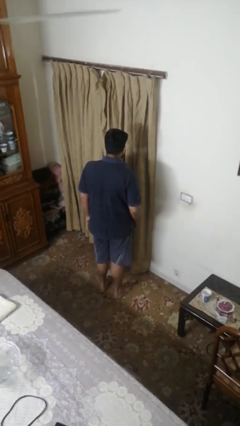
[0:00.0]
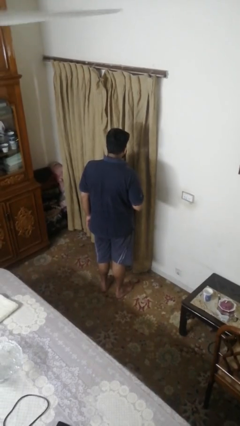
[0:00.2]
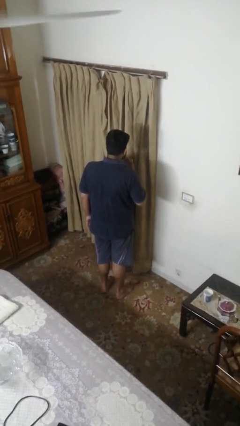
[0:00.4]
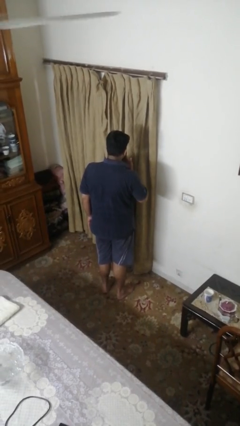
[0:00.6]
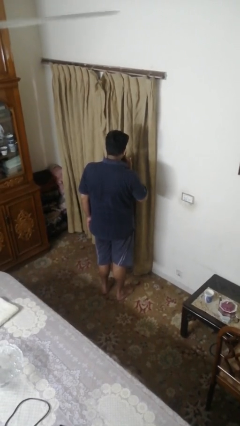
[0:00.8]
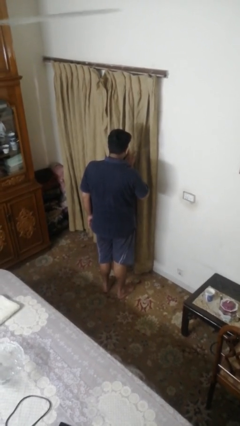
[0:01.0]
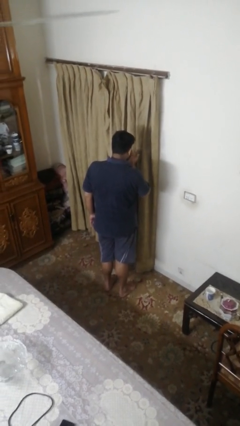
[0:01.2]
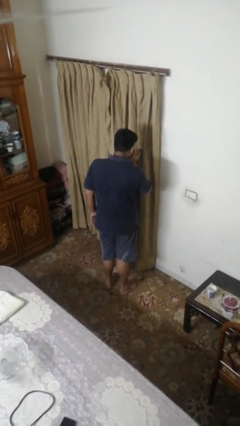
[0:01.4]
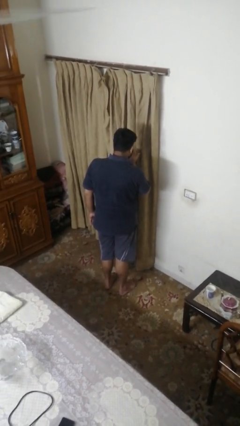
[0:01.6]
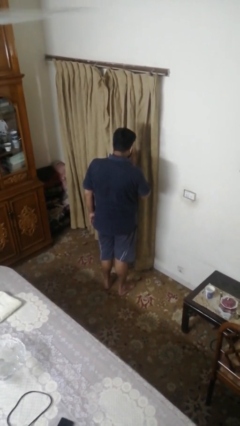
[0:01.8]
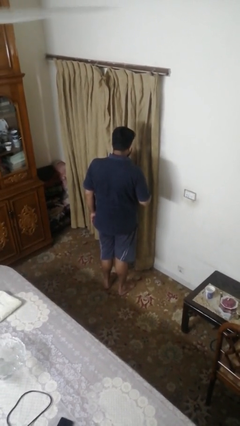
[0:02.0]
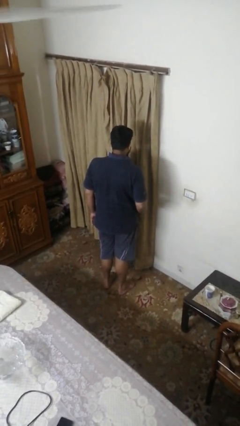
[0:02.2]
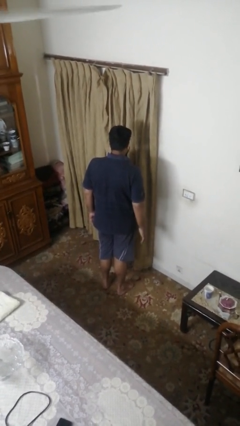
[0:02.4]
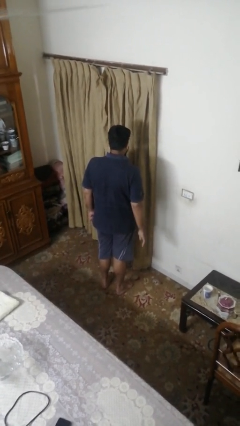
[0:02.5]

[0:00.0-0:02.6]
person gestures blow kiss

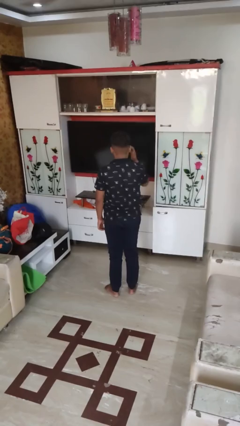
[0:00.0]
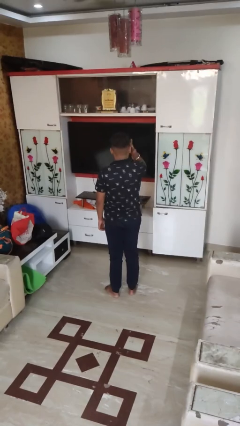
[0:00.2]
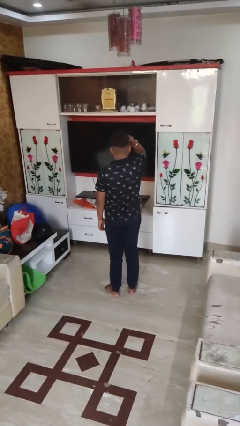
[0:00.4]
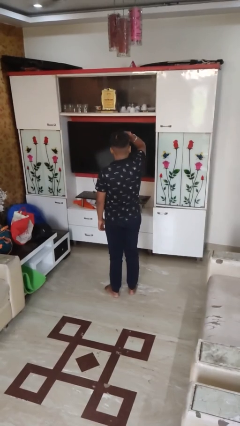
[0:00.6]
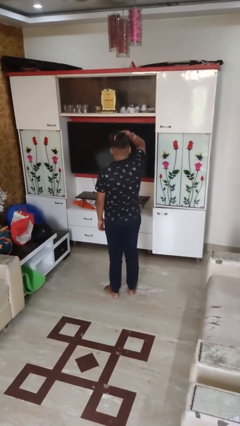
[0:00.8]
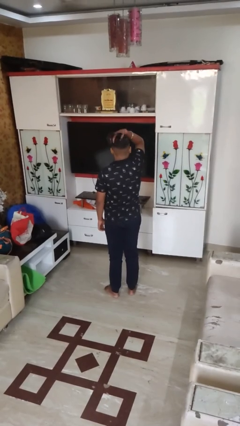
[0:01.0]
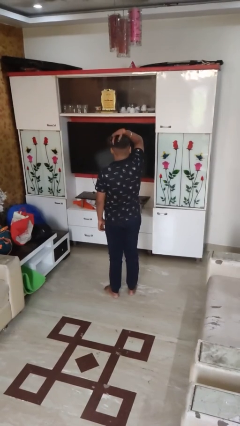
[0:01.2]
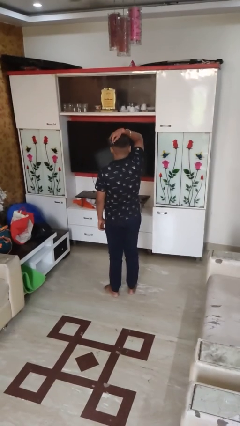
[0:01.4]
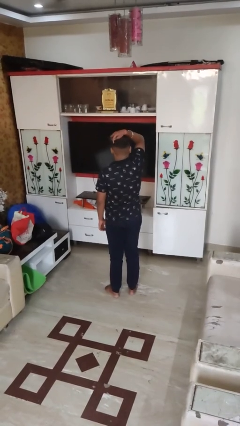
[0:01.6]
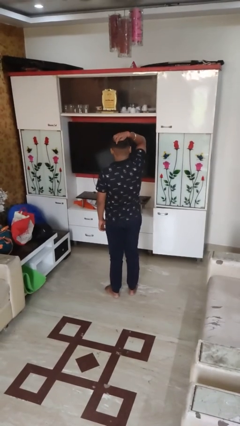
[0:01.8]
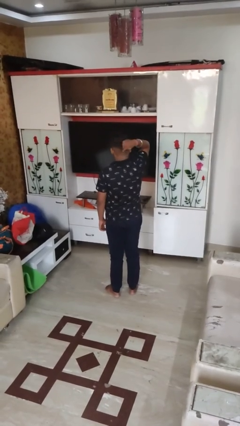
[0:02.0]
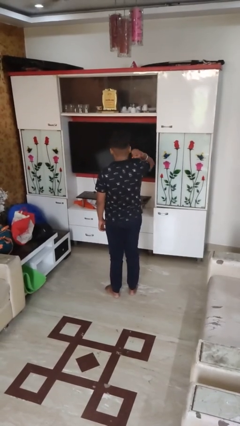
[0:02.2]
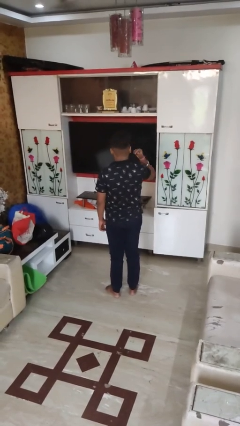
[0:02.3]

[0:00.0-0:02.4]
person strokes hair

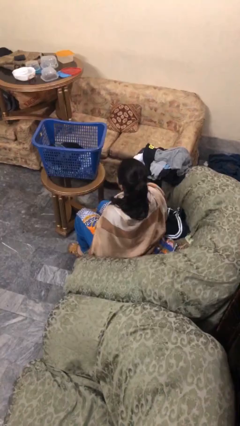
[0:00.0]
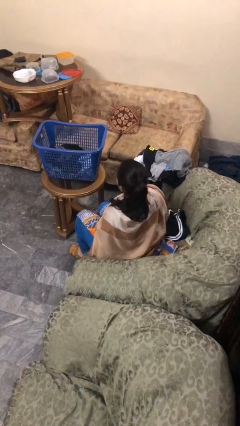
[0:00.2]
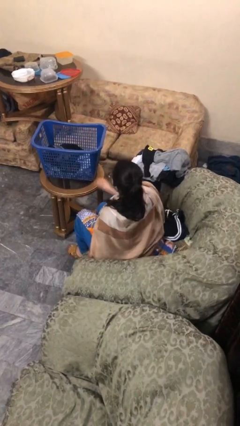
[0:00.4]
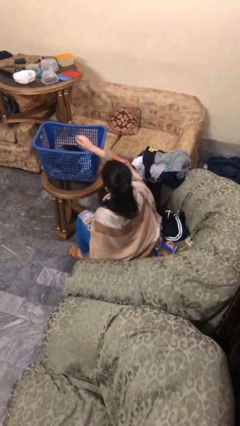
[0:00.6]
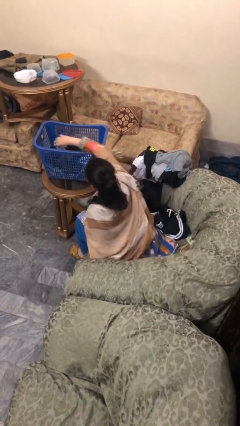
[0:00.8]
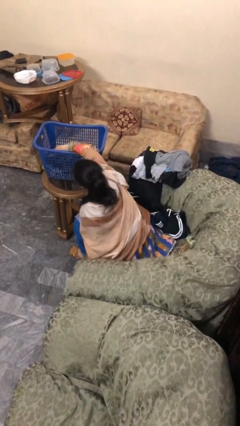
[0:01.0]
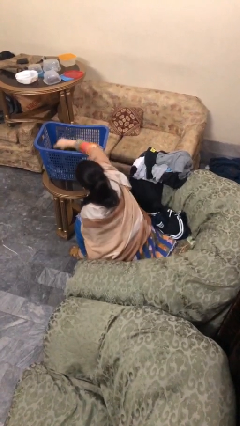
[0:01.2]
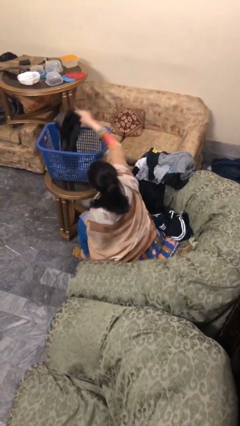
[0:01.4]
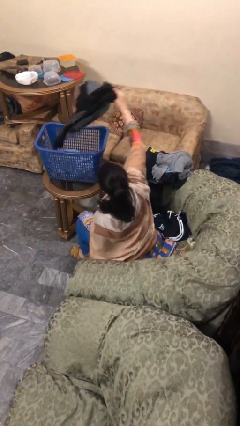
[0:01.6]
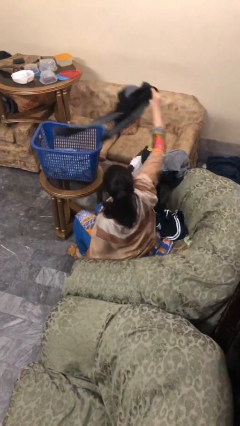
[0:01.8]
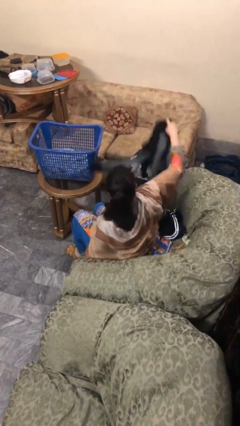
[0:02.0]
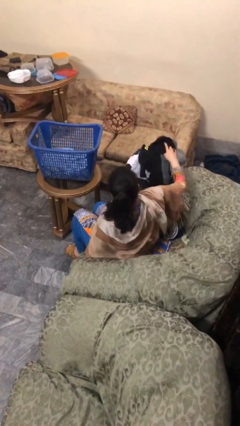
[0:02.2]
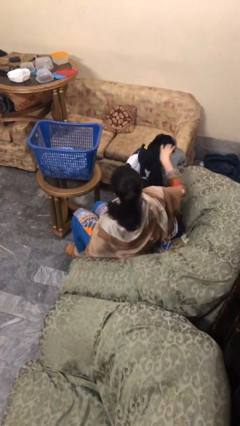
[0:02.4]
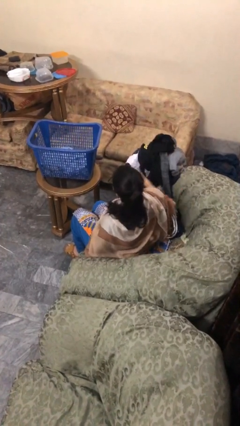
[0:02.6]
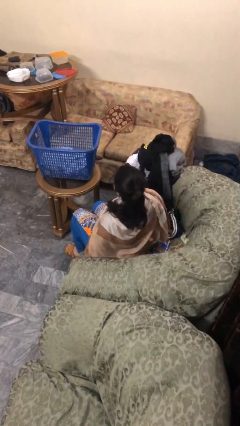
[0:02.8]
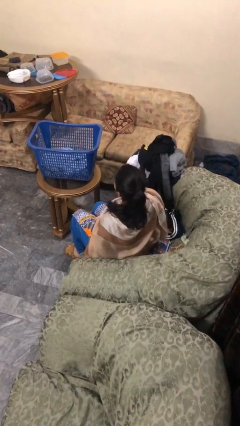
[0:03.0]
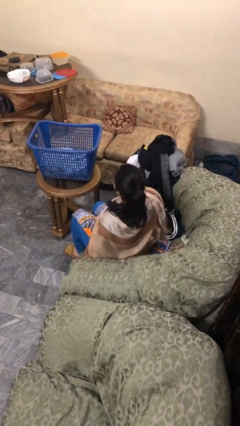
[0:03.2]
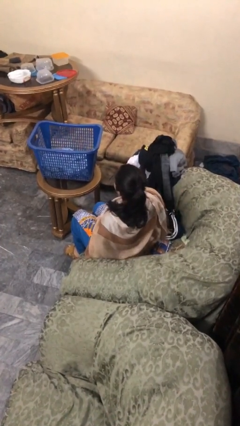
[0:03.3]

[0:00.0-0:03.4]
person takes object from basket

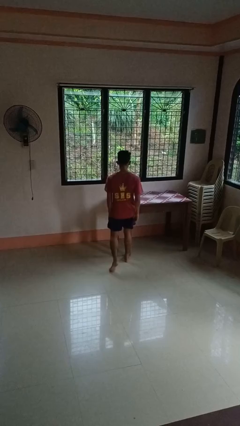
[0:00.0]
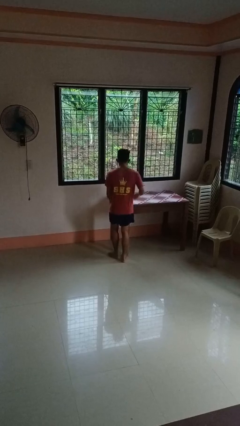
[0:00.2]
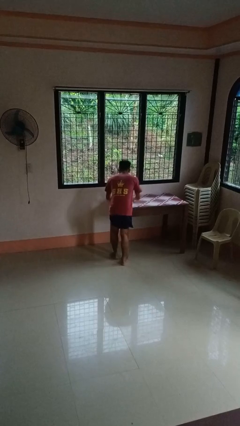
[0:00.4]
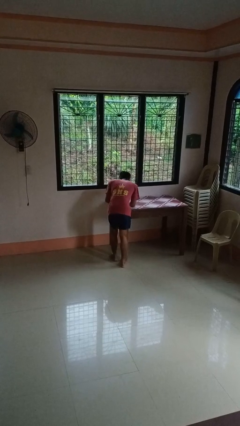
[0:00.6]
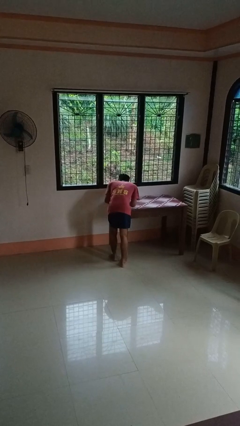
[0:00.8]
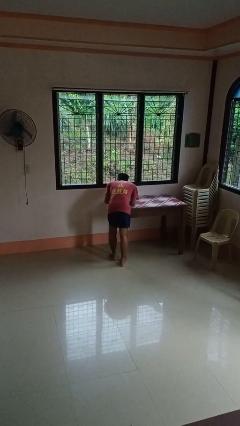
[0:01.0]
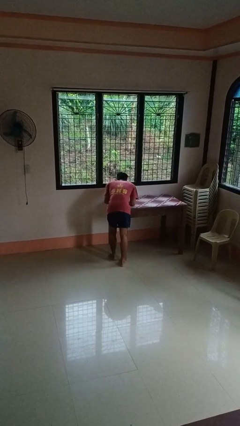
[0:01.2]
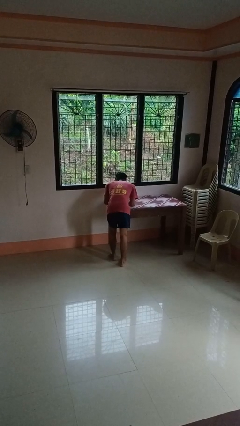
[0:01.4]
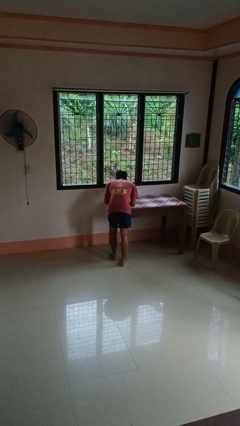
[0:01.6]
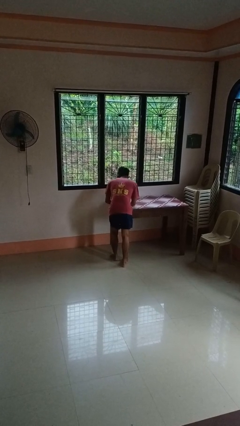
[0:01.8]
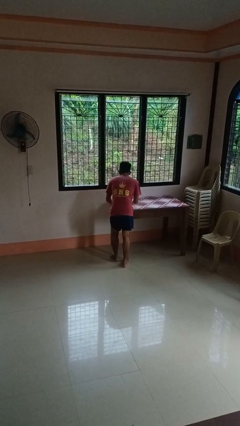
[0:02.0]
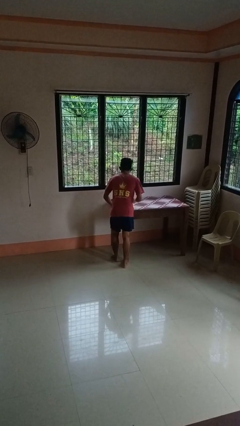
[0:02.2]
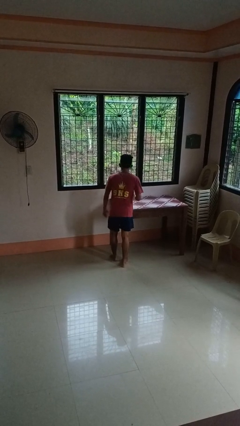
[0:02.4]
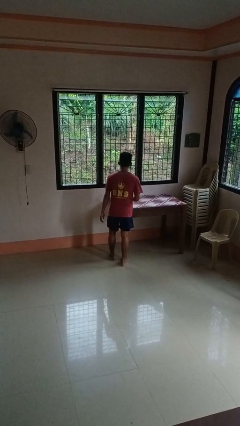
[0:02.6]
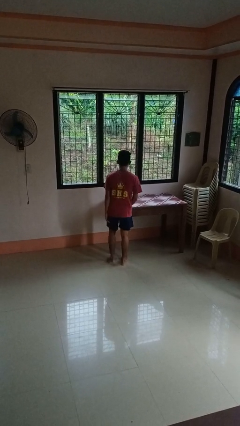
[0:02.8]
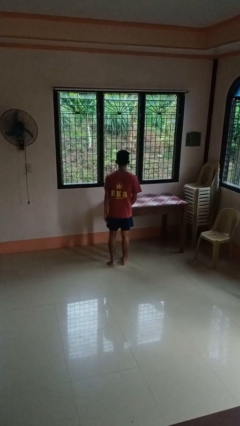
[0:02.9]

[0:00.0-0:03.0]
person bumps into table

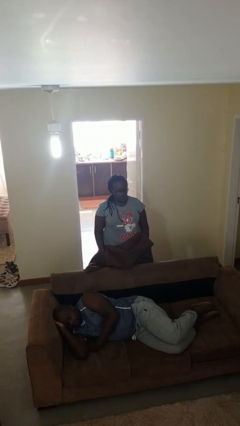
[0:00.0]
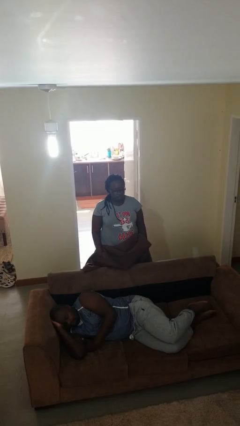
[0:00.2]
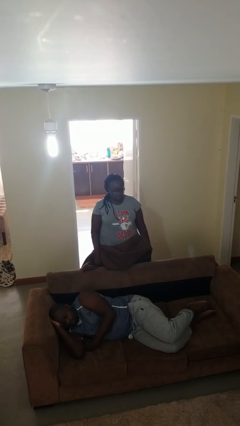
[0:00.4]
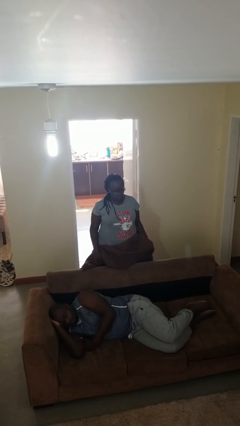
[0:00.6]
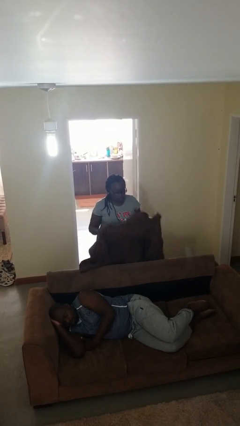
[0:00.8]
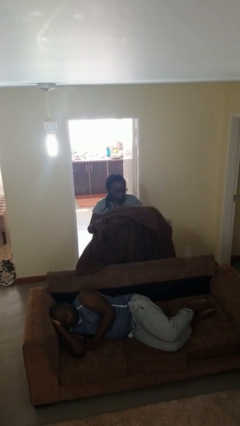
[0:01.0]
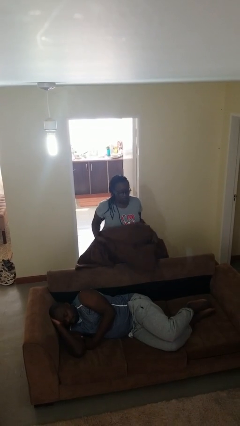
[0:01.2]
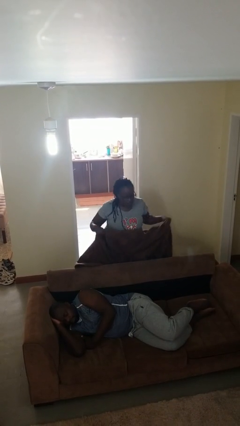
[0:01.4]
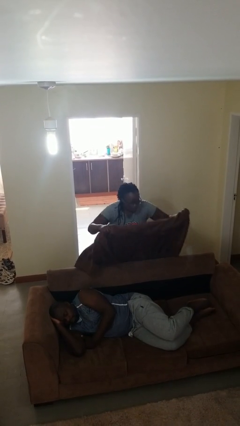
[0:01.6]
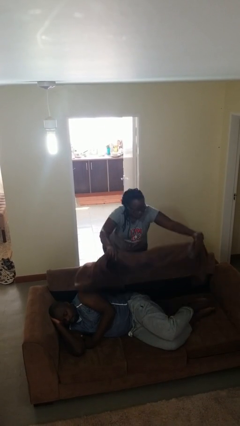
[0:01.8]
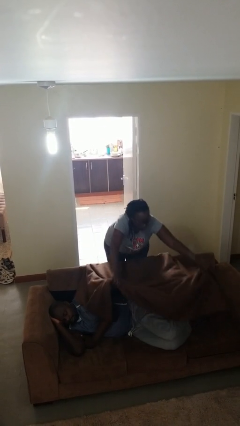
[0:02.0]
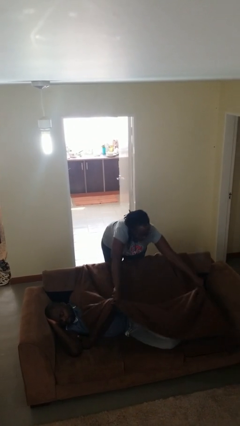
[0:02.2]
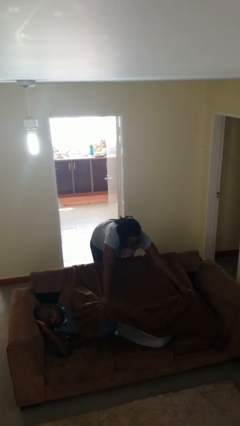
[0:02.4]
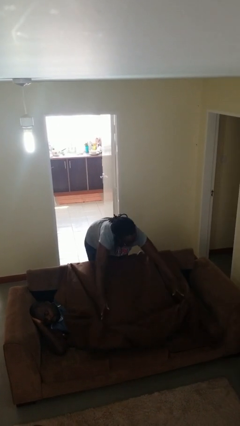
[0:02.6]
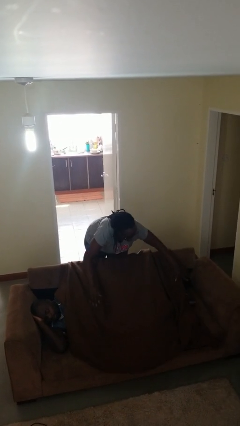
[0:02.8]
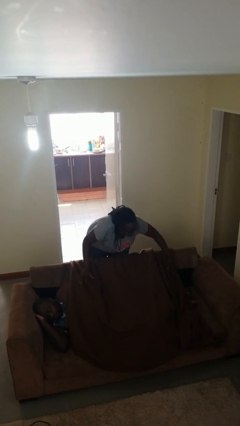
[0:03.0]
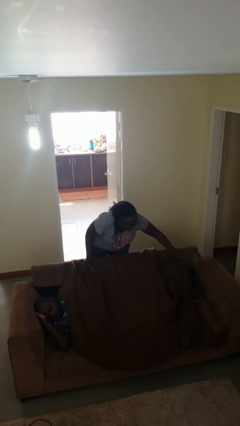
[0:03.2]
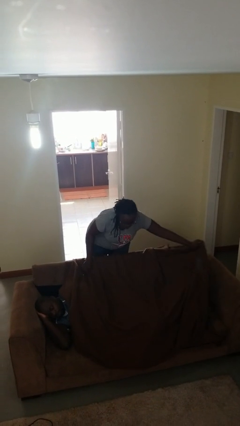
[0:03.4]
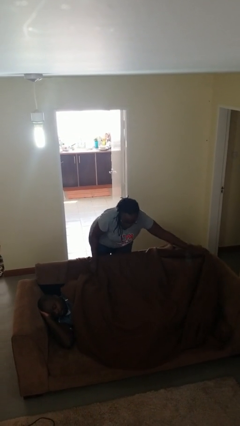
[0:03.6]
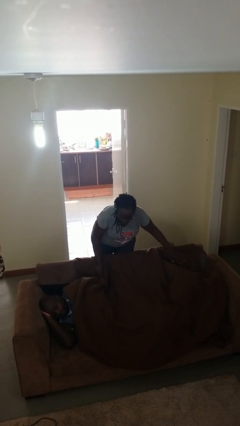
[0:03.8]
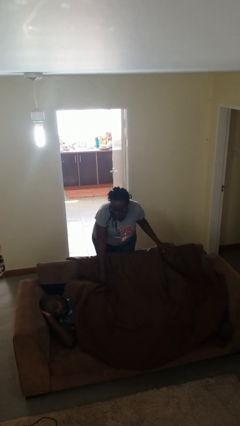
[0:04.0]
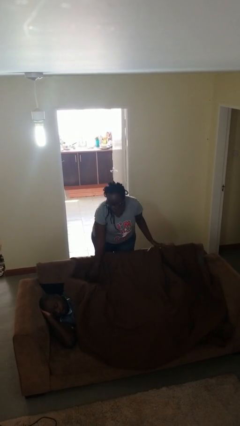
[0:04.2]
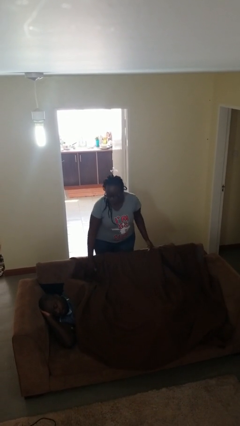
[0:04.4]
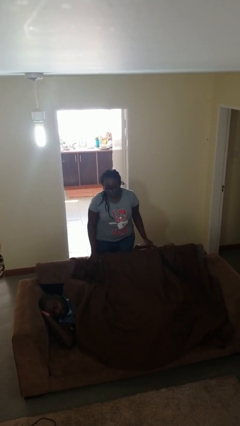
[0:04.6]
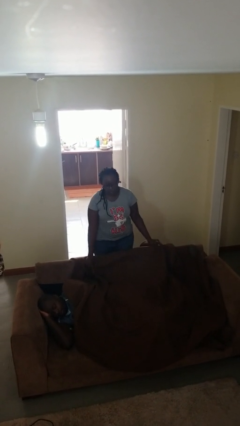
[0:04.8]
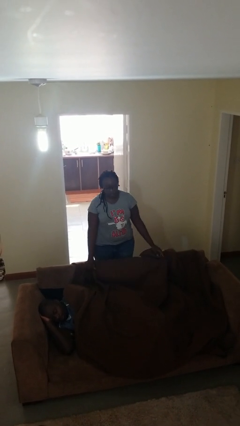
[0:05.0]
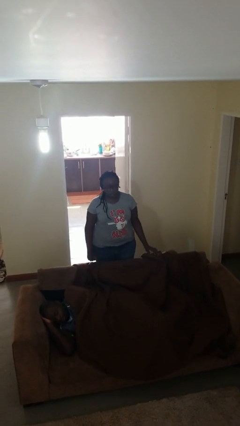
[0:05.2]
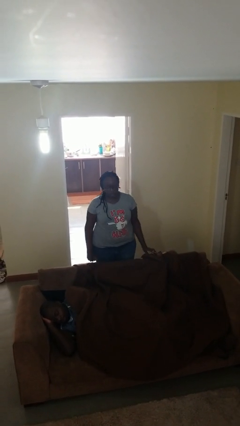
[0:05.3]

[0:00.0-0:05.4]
person covers friend with blanket

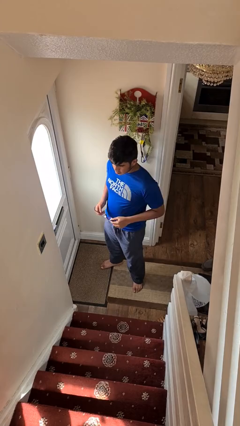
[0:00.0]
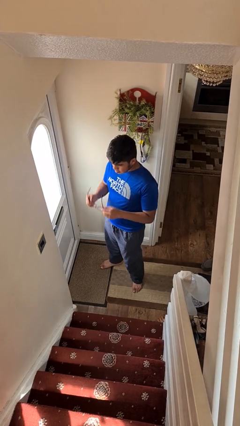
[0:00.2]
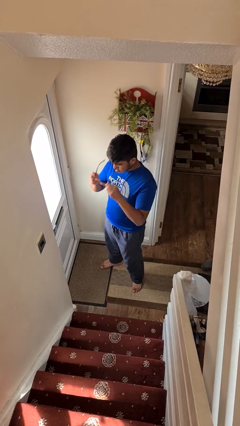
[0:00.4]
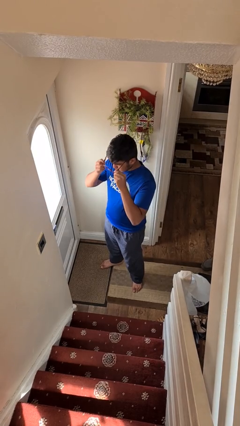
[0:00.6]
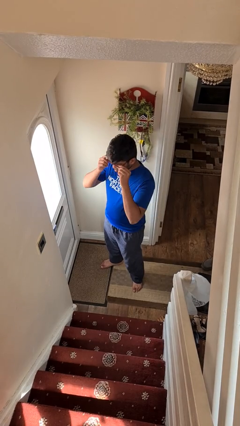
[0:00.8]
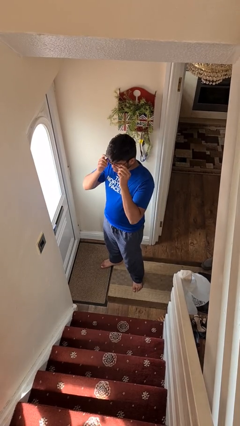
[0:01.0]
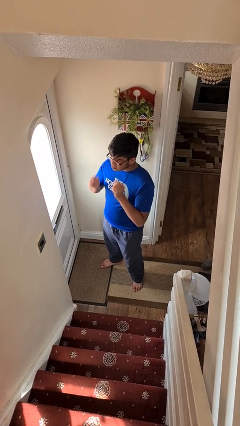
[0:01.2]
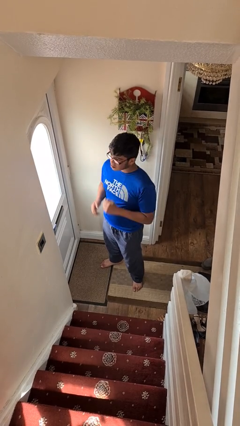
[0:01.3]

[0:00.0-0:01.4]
person puts on glasses
